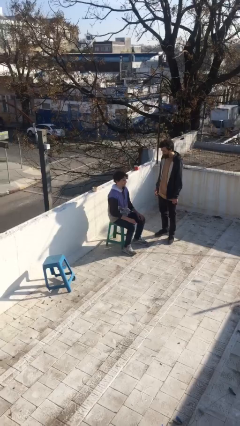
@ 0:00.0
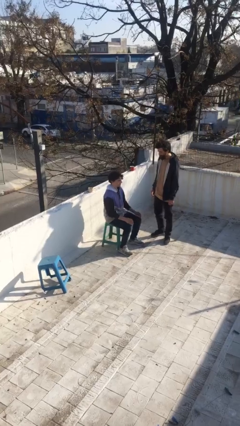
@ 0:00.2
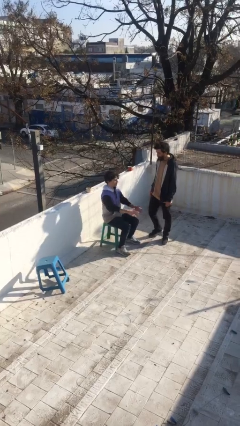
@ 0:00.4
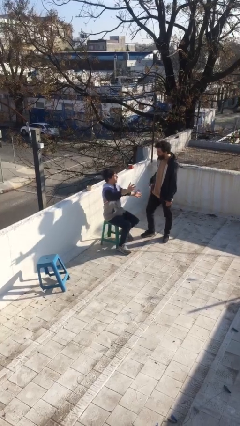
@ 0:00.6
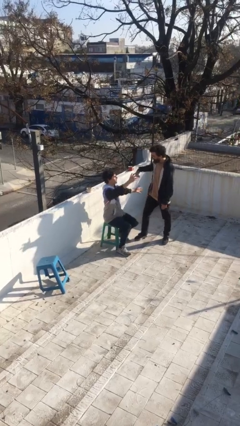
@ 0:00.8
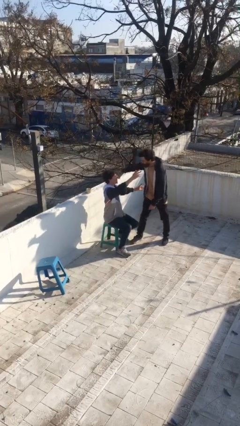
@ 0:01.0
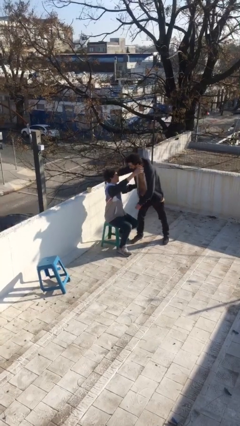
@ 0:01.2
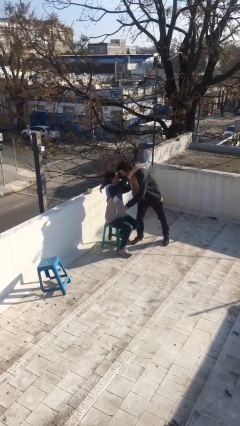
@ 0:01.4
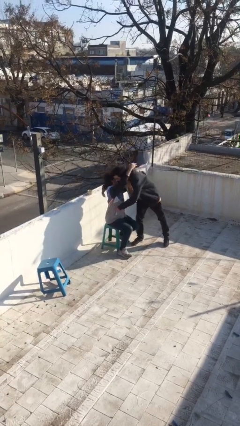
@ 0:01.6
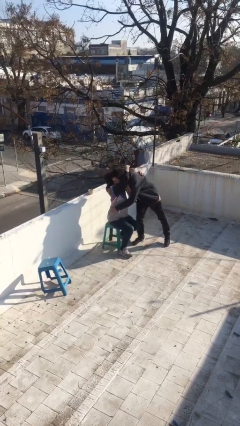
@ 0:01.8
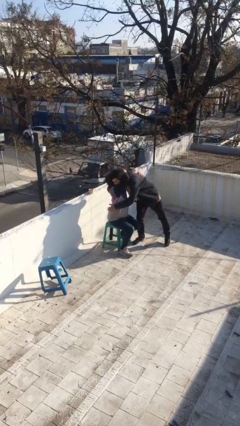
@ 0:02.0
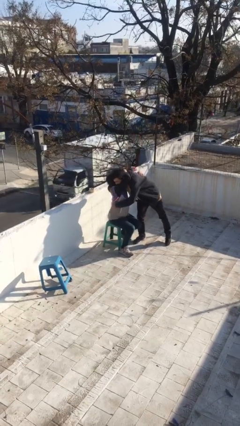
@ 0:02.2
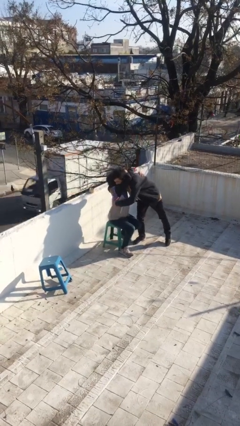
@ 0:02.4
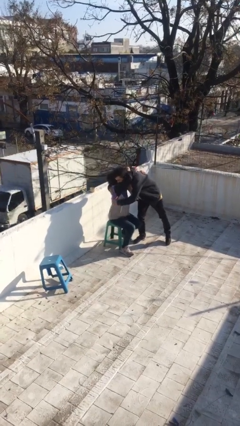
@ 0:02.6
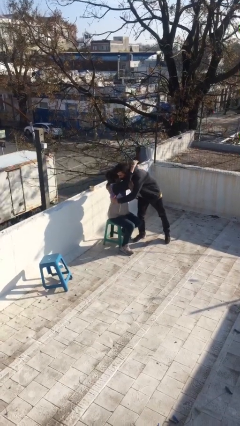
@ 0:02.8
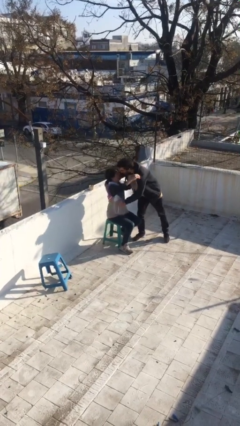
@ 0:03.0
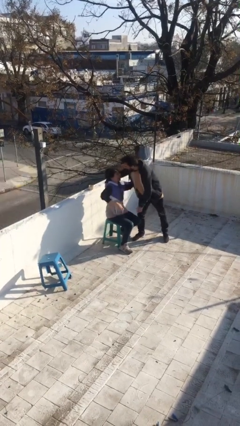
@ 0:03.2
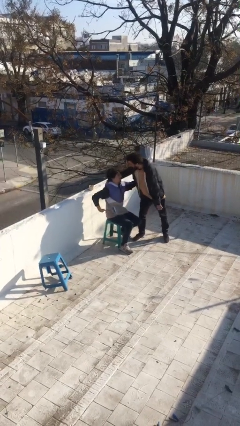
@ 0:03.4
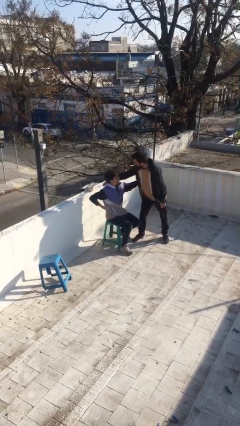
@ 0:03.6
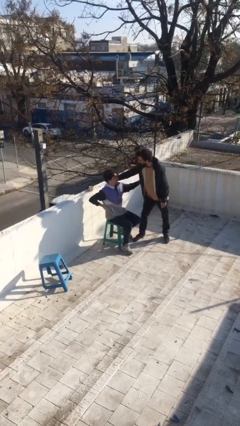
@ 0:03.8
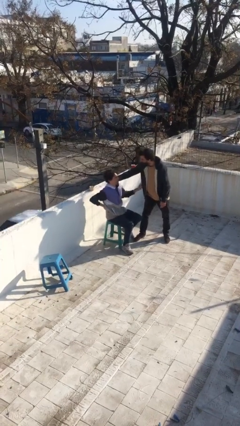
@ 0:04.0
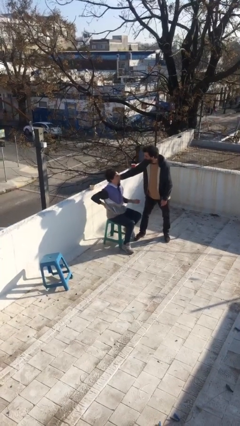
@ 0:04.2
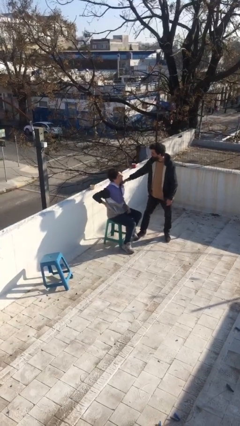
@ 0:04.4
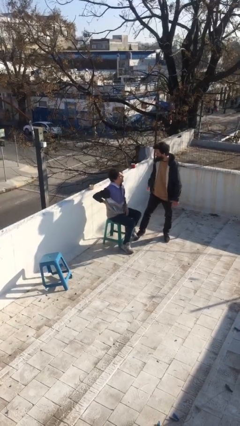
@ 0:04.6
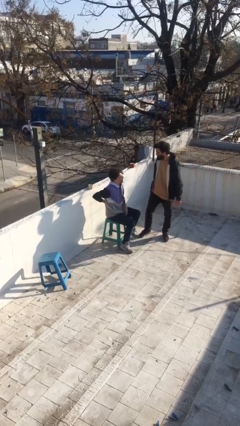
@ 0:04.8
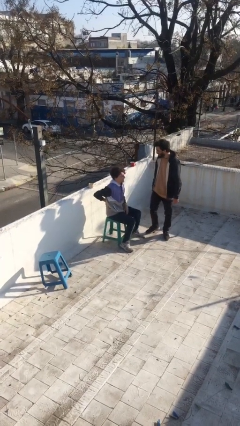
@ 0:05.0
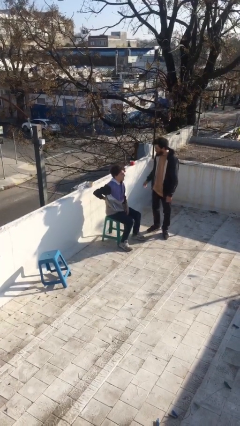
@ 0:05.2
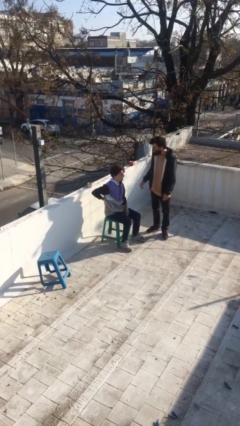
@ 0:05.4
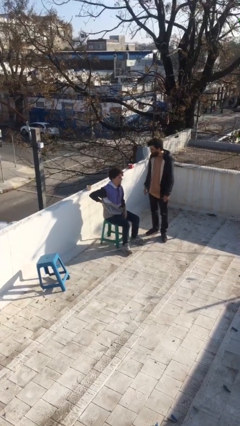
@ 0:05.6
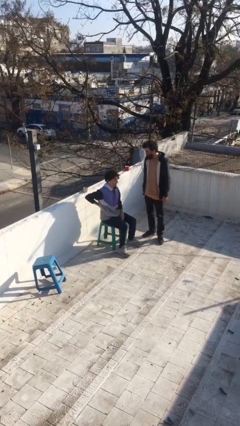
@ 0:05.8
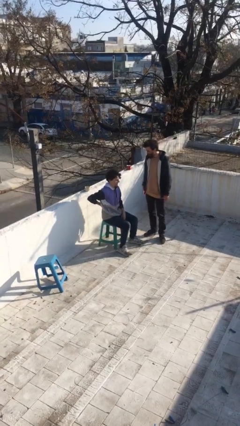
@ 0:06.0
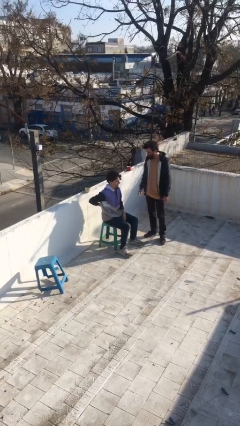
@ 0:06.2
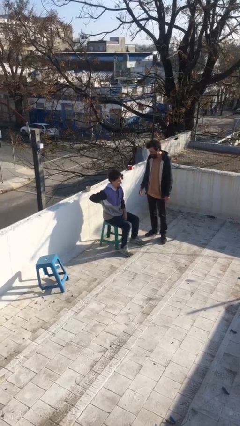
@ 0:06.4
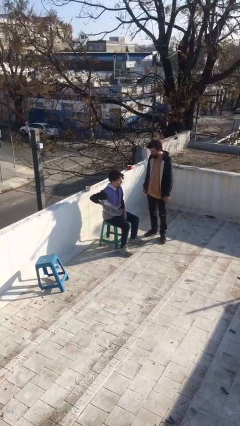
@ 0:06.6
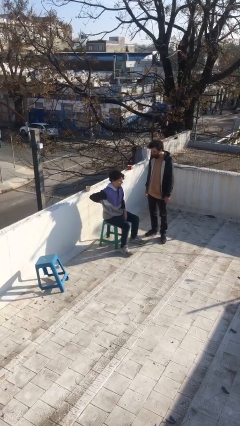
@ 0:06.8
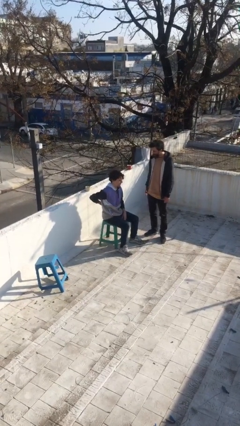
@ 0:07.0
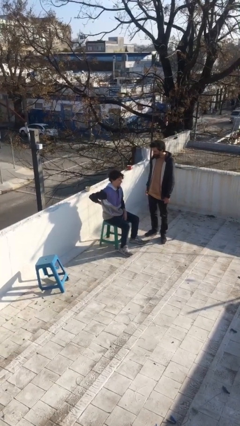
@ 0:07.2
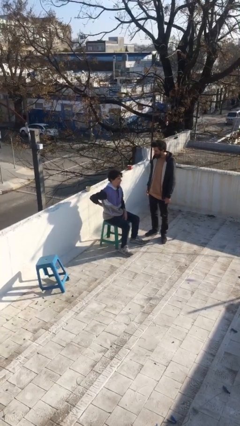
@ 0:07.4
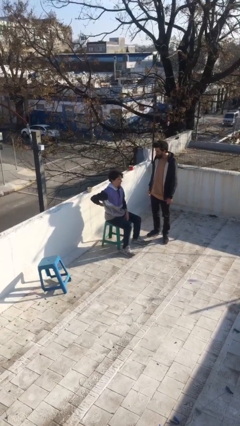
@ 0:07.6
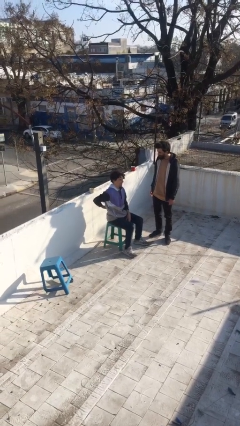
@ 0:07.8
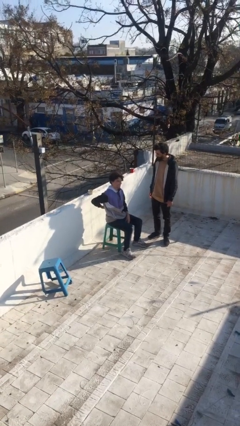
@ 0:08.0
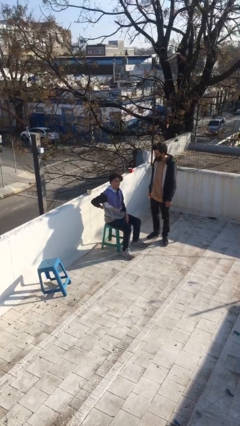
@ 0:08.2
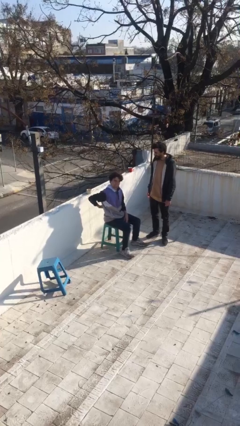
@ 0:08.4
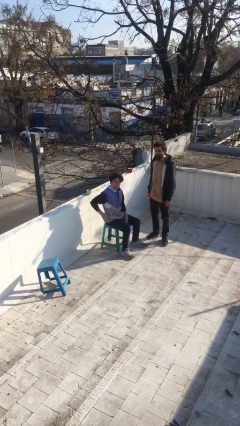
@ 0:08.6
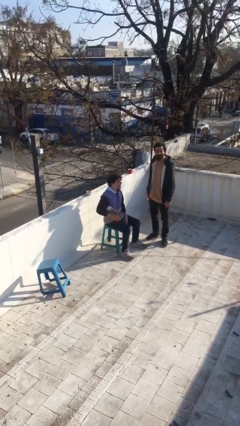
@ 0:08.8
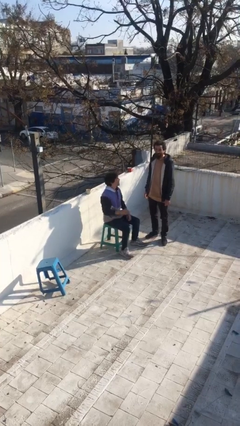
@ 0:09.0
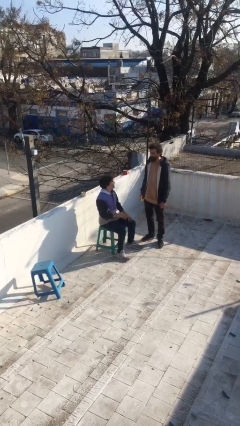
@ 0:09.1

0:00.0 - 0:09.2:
person embraces person

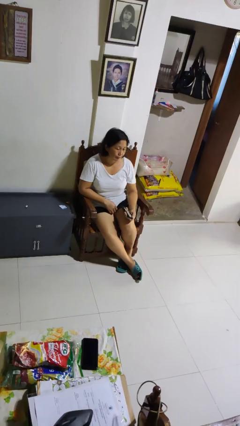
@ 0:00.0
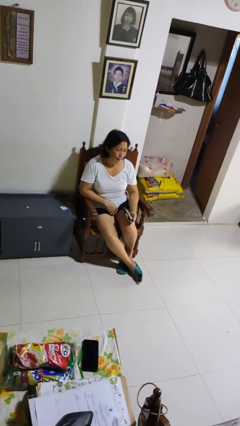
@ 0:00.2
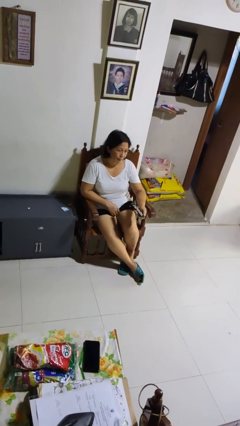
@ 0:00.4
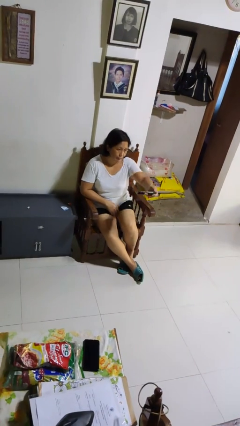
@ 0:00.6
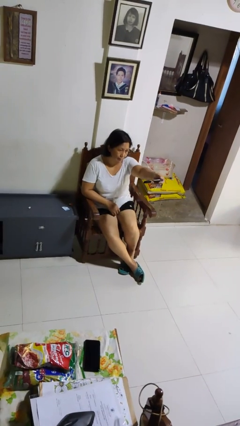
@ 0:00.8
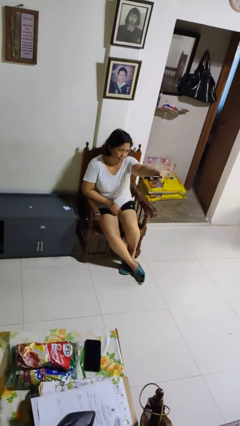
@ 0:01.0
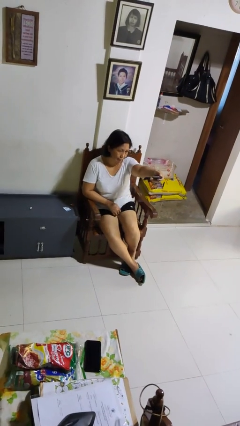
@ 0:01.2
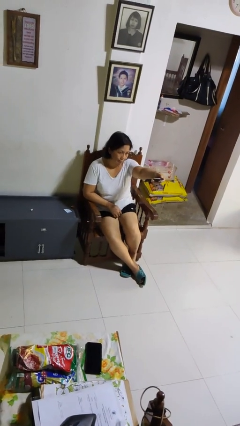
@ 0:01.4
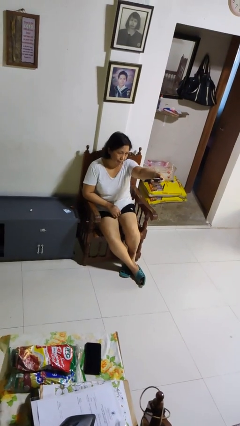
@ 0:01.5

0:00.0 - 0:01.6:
person uses television remote

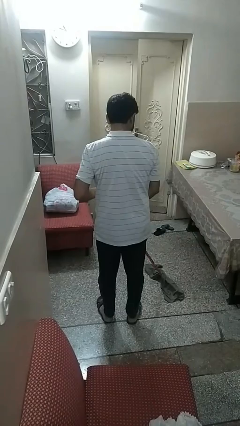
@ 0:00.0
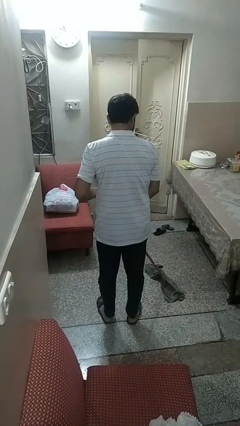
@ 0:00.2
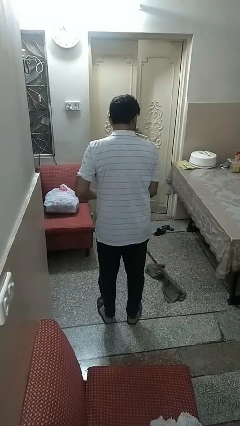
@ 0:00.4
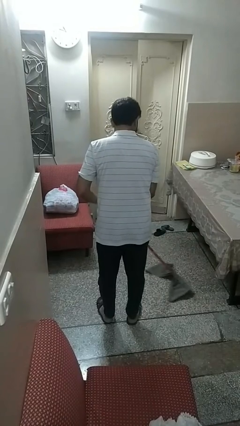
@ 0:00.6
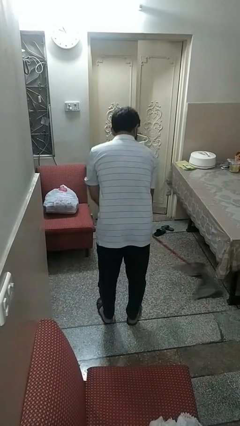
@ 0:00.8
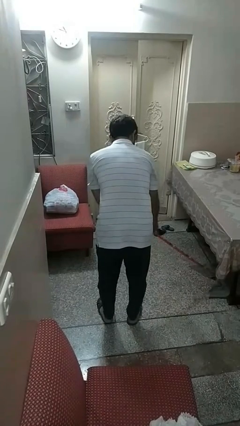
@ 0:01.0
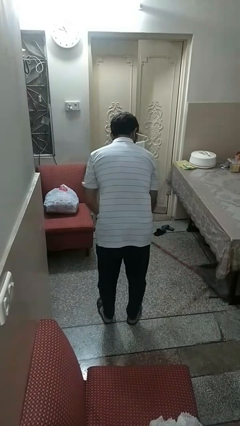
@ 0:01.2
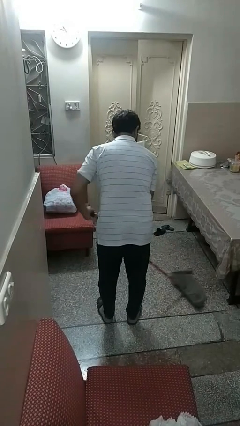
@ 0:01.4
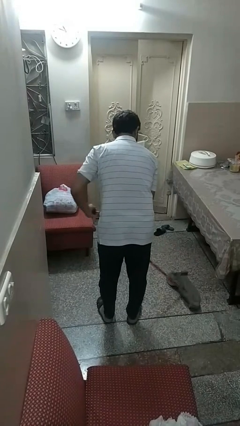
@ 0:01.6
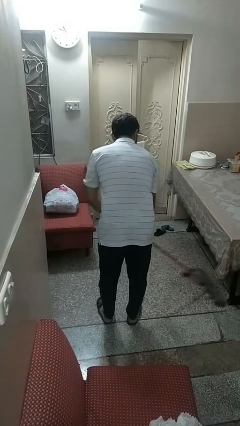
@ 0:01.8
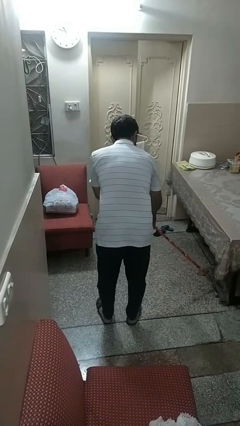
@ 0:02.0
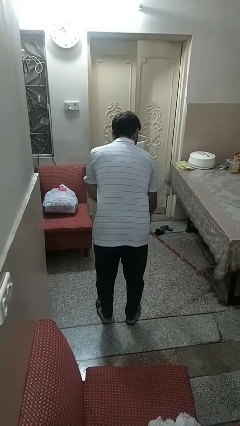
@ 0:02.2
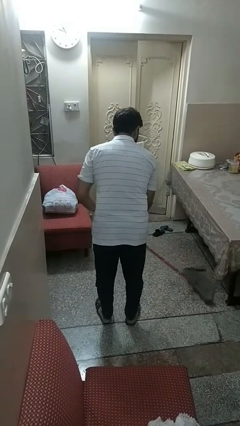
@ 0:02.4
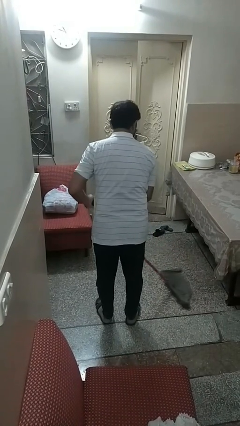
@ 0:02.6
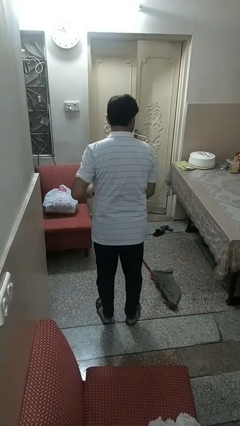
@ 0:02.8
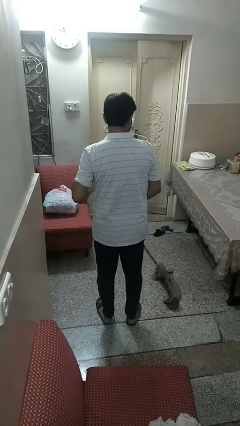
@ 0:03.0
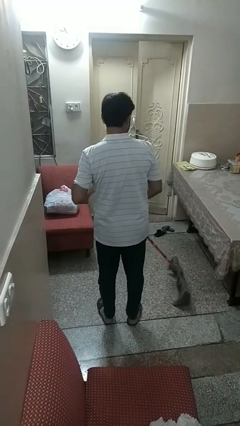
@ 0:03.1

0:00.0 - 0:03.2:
person mops

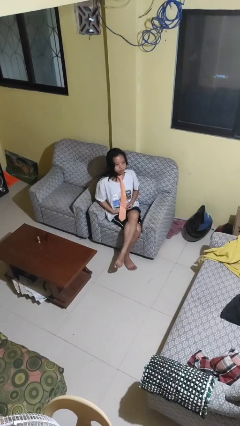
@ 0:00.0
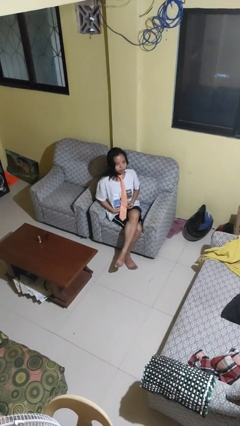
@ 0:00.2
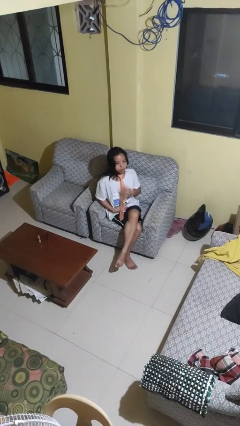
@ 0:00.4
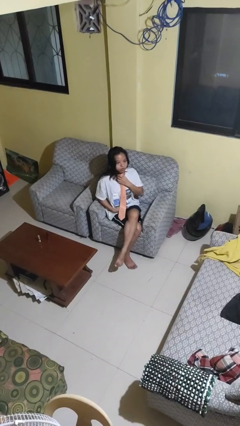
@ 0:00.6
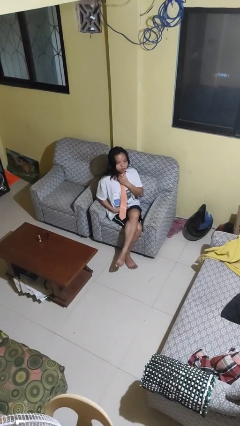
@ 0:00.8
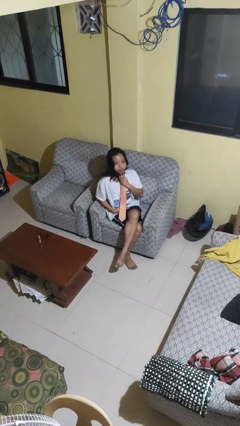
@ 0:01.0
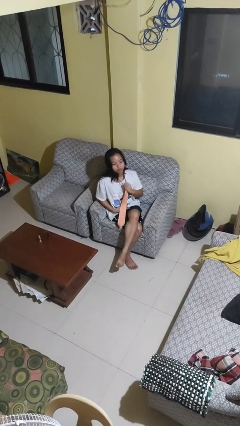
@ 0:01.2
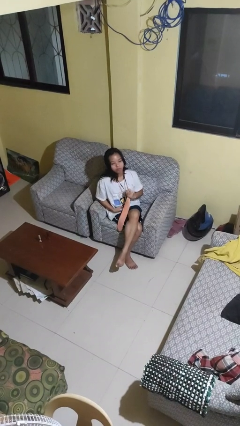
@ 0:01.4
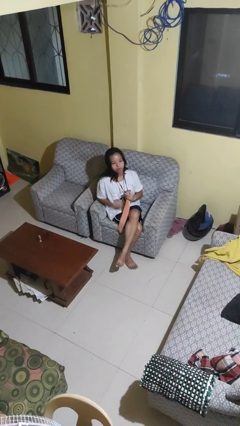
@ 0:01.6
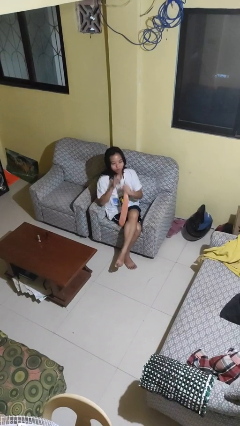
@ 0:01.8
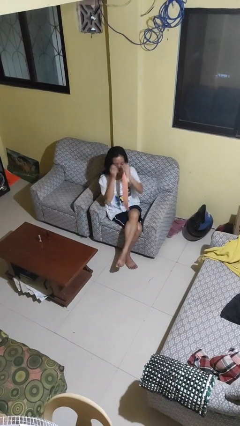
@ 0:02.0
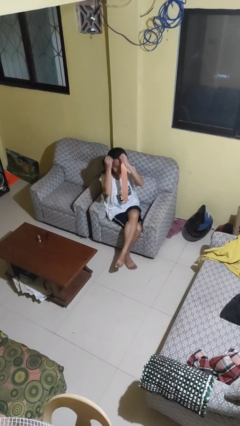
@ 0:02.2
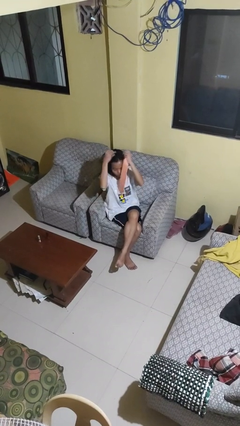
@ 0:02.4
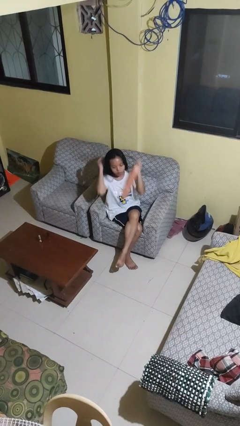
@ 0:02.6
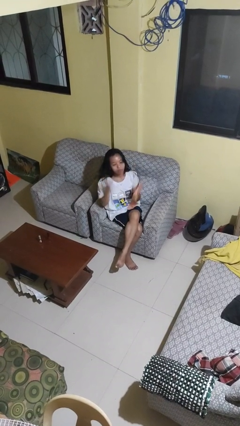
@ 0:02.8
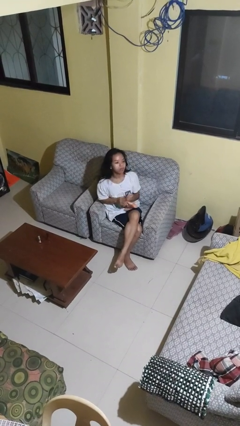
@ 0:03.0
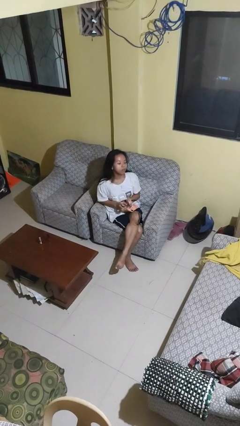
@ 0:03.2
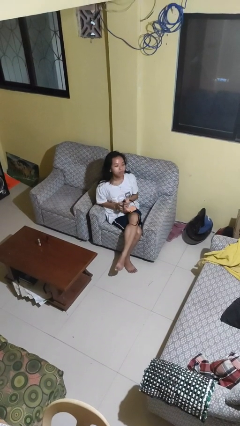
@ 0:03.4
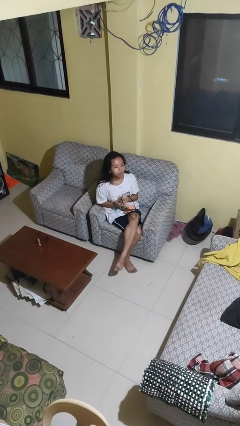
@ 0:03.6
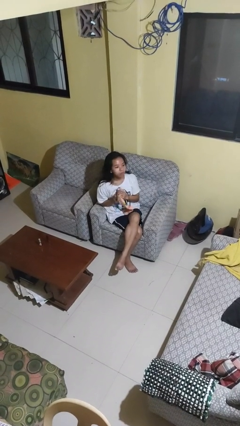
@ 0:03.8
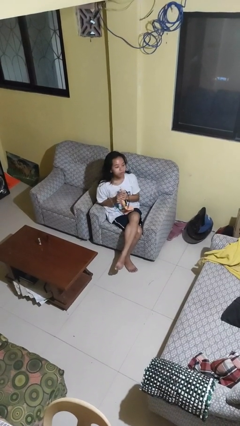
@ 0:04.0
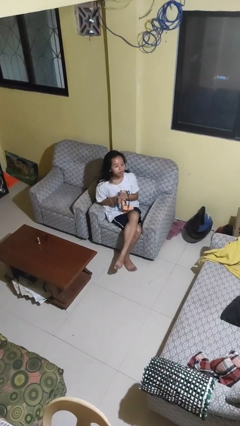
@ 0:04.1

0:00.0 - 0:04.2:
person takes off necktie
